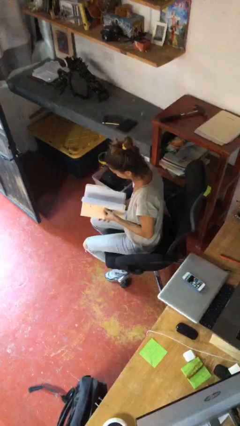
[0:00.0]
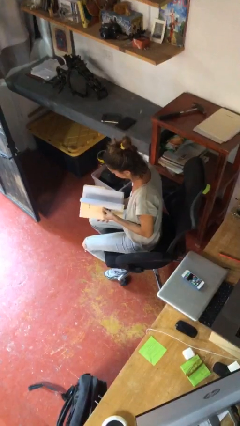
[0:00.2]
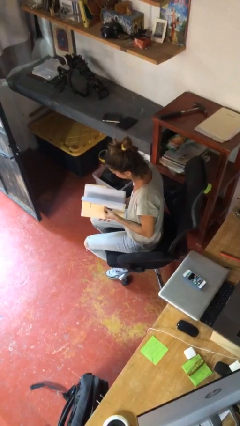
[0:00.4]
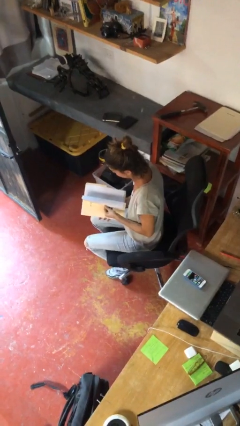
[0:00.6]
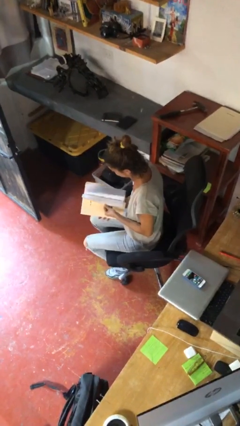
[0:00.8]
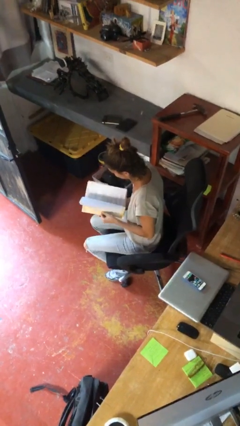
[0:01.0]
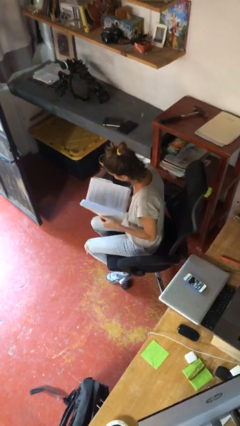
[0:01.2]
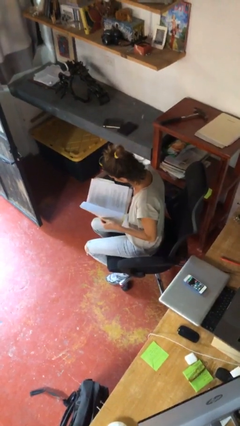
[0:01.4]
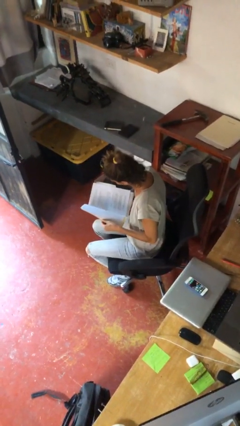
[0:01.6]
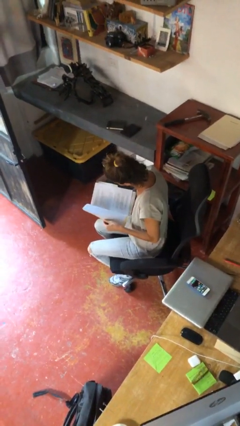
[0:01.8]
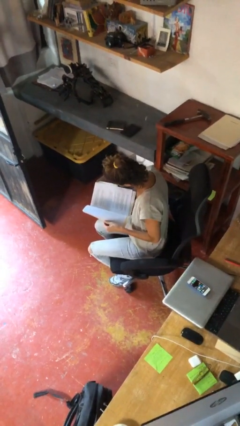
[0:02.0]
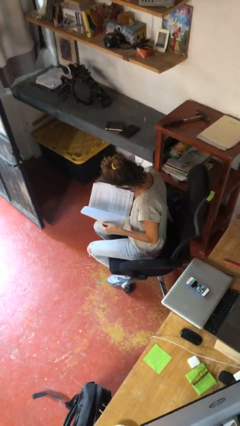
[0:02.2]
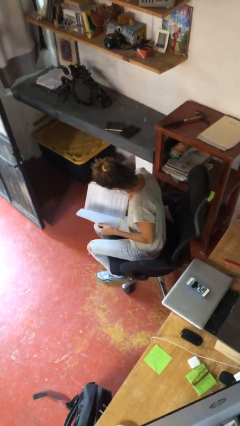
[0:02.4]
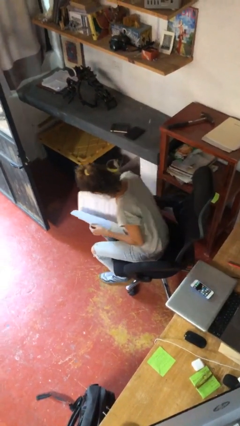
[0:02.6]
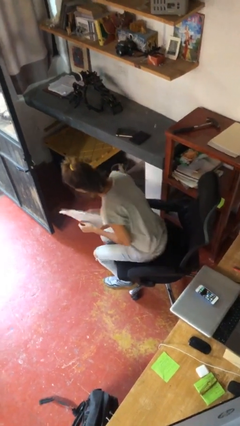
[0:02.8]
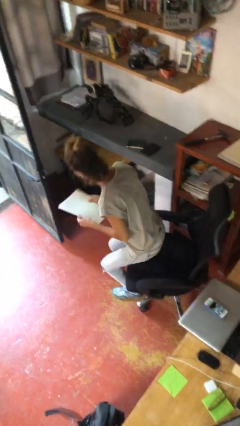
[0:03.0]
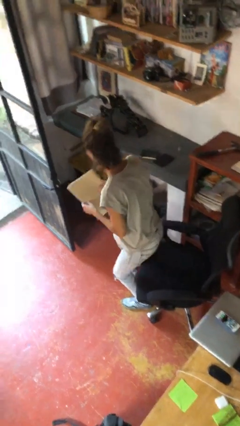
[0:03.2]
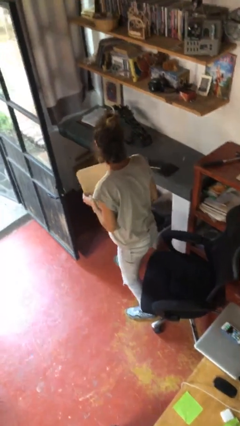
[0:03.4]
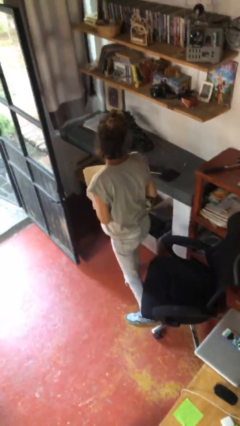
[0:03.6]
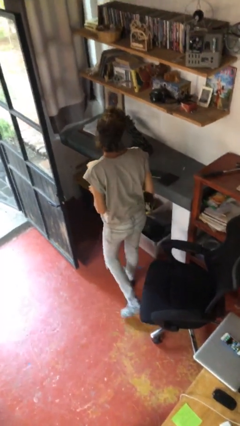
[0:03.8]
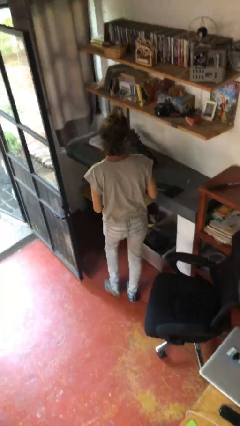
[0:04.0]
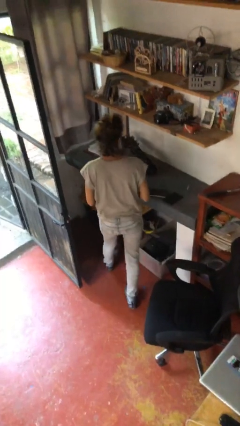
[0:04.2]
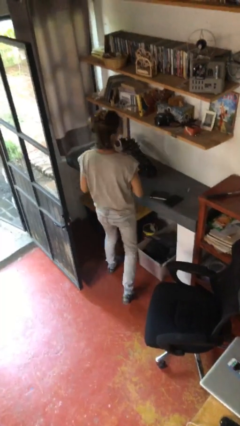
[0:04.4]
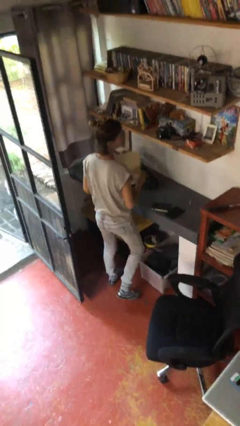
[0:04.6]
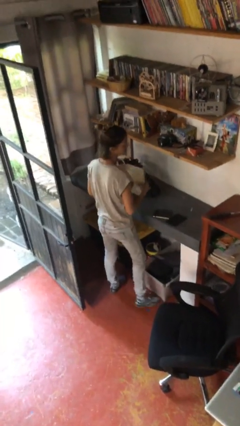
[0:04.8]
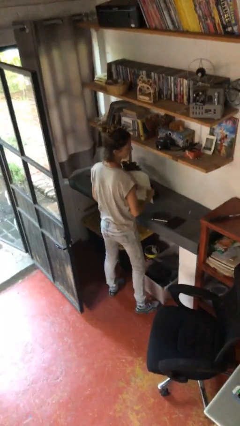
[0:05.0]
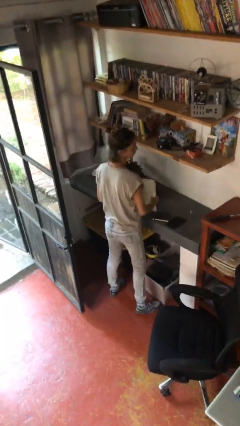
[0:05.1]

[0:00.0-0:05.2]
person stands up

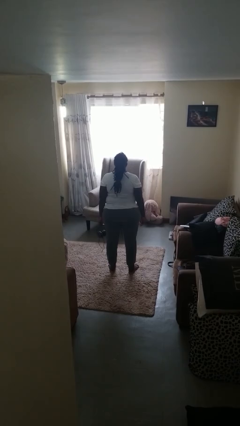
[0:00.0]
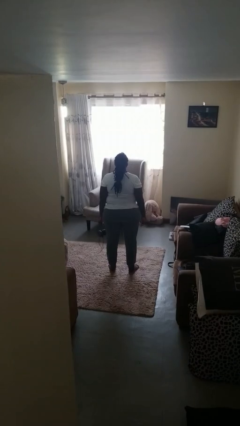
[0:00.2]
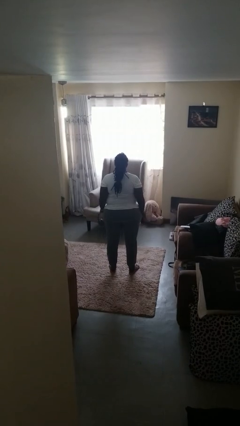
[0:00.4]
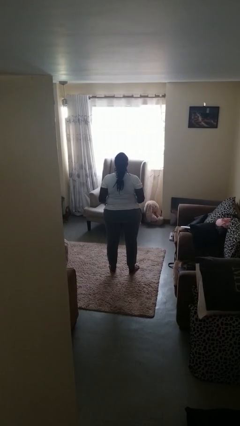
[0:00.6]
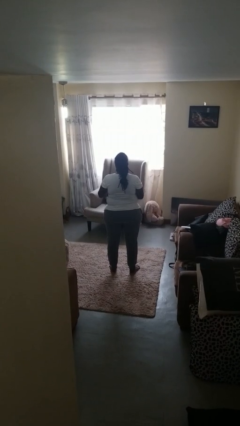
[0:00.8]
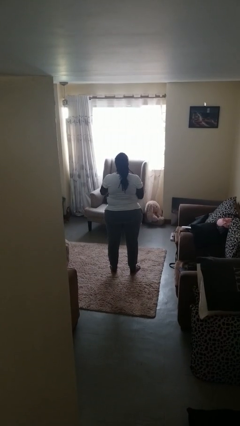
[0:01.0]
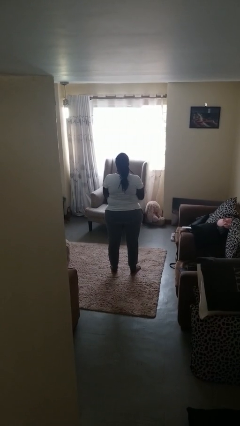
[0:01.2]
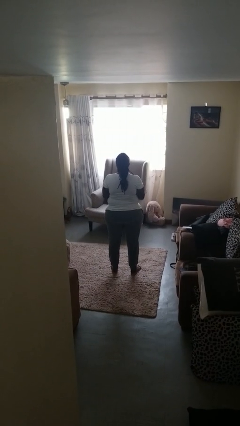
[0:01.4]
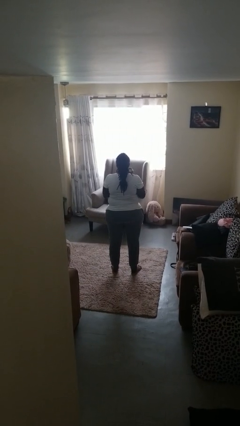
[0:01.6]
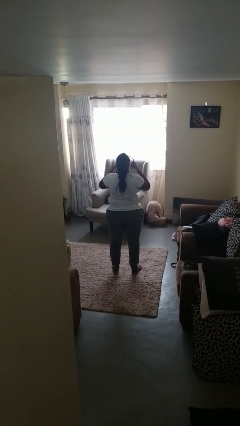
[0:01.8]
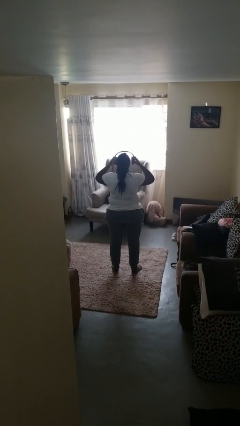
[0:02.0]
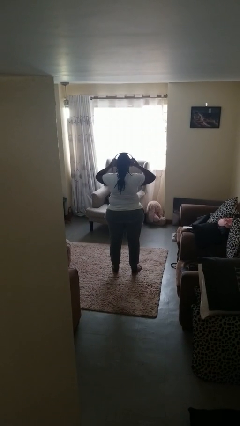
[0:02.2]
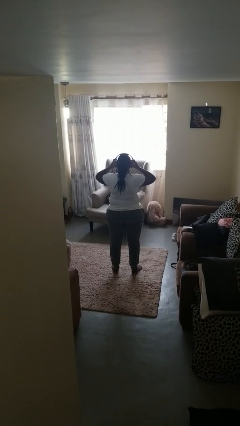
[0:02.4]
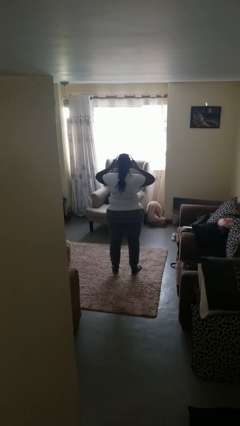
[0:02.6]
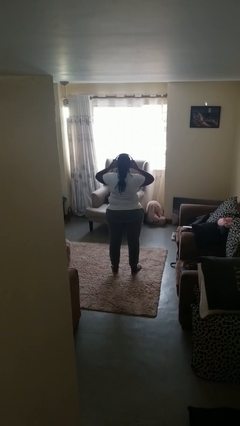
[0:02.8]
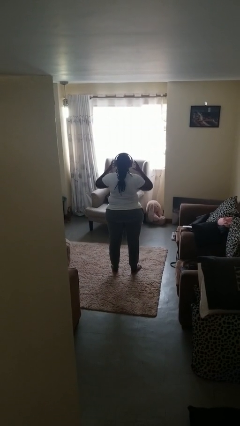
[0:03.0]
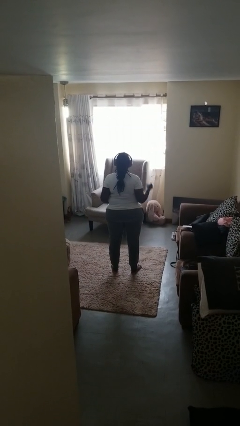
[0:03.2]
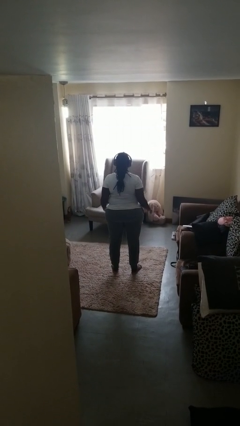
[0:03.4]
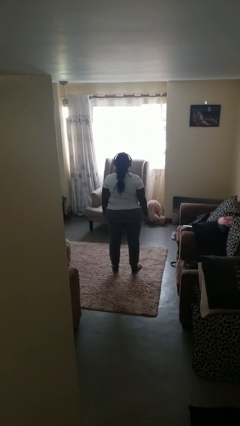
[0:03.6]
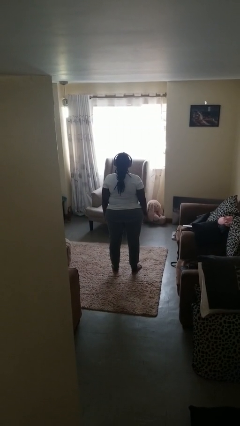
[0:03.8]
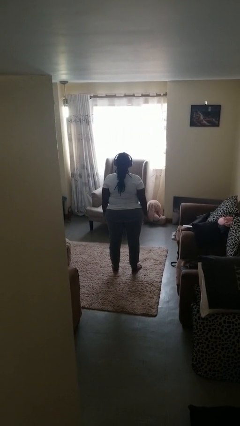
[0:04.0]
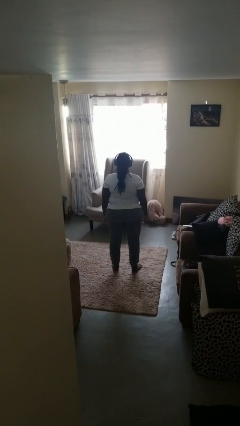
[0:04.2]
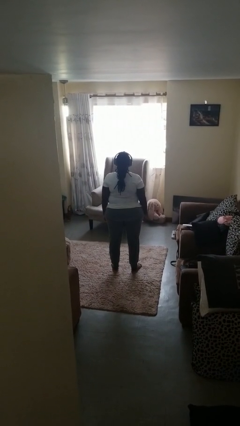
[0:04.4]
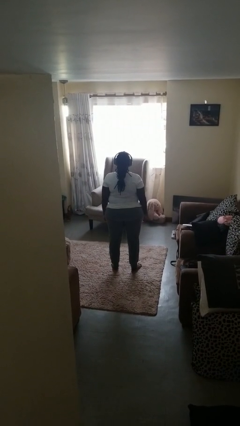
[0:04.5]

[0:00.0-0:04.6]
person puts on headphones

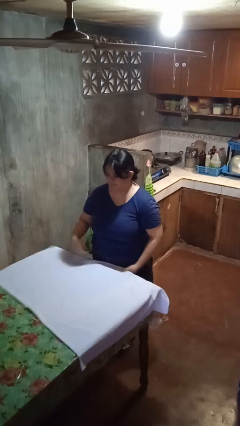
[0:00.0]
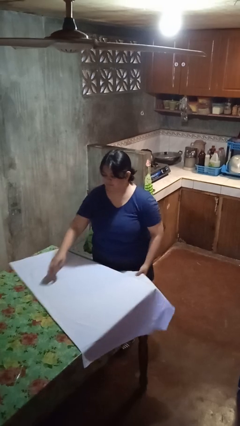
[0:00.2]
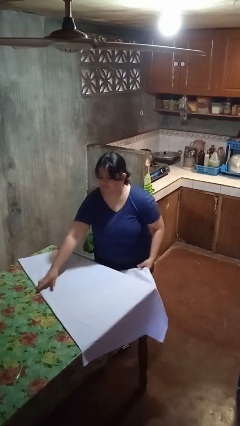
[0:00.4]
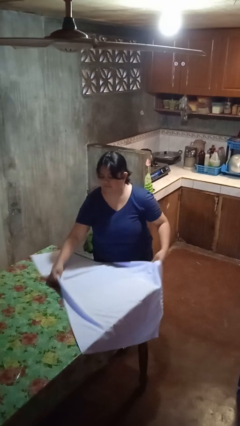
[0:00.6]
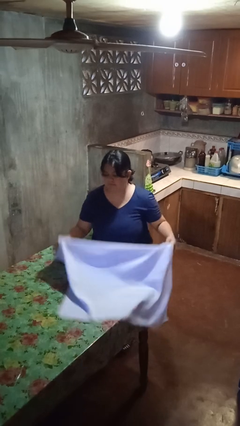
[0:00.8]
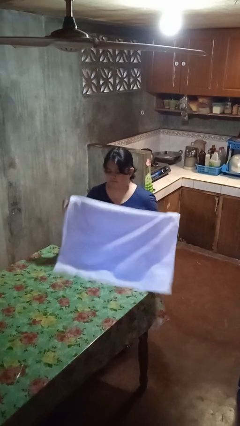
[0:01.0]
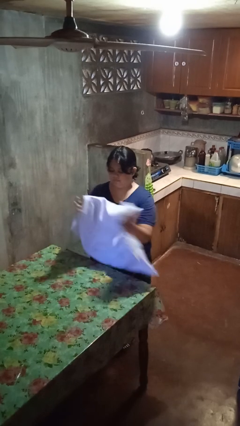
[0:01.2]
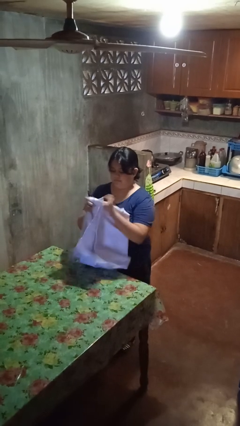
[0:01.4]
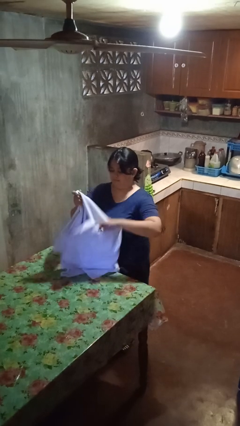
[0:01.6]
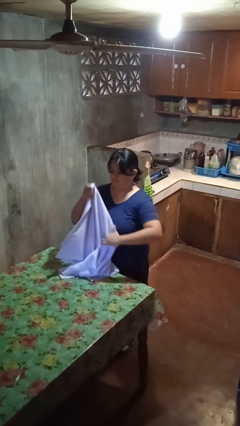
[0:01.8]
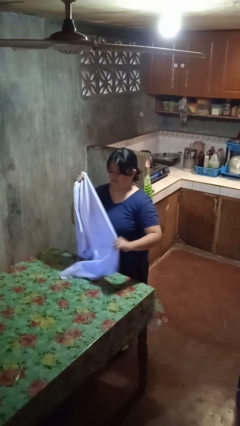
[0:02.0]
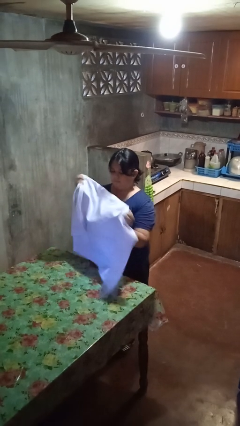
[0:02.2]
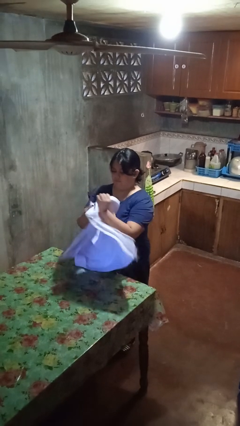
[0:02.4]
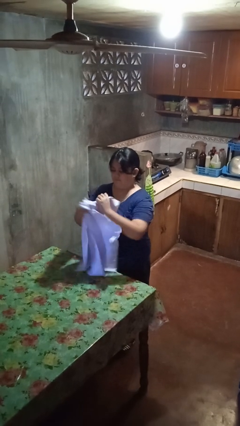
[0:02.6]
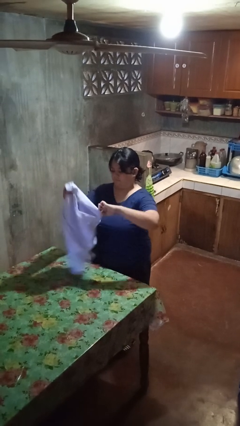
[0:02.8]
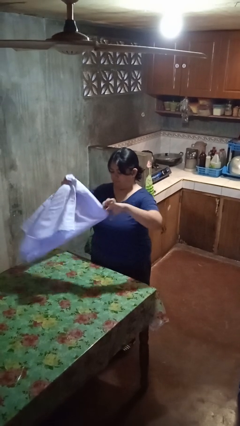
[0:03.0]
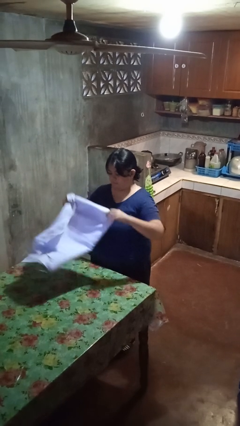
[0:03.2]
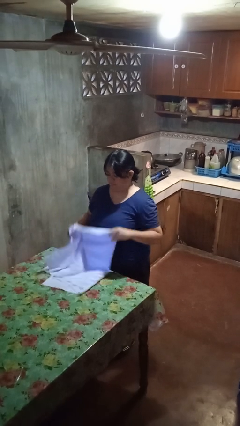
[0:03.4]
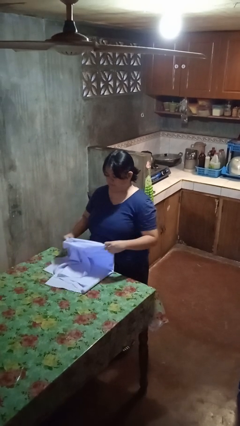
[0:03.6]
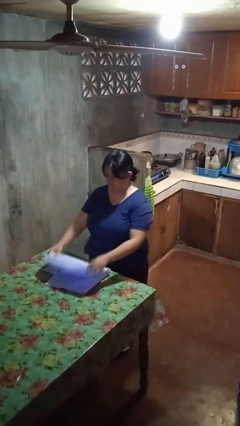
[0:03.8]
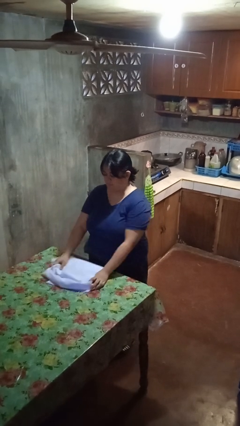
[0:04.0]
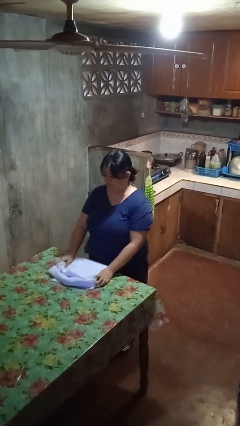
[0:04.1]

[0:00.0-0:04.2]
person folds tablecloth

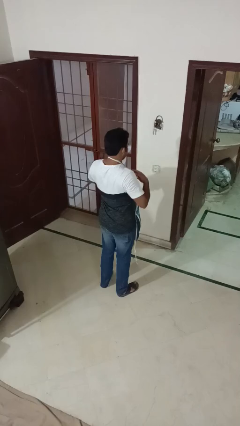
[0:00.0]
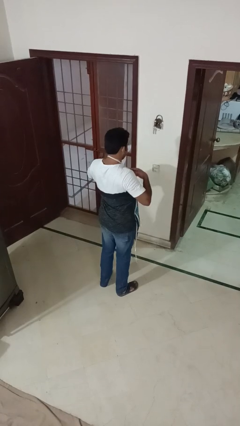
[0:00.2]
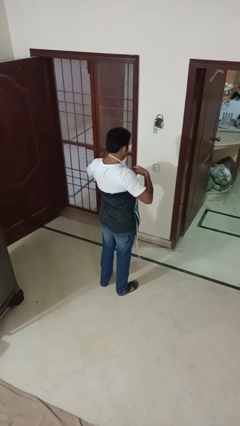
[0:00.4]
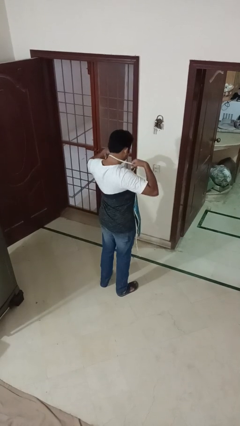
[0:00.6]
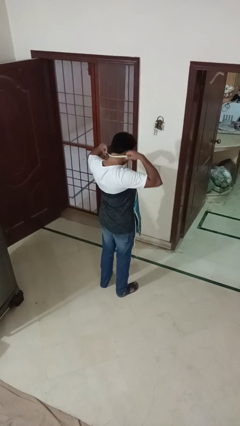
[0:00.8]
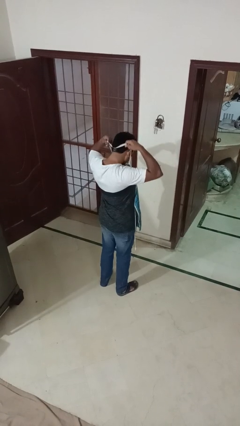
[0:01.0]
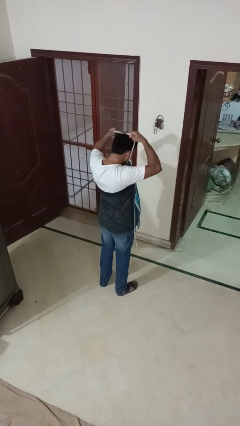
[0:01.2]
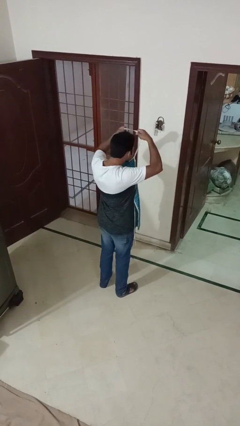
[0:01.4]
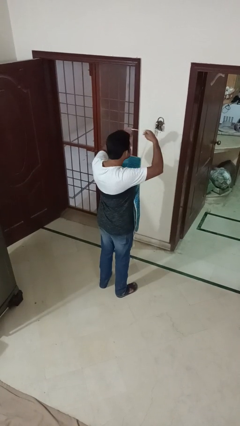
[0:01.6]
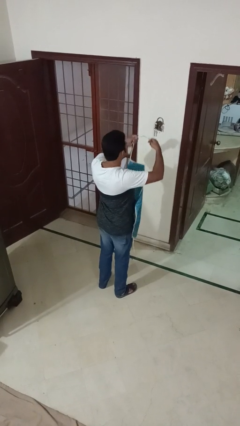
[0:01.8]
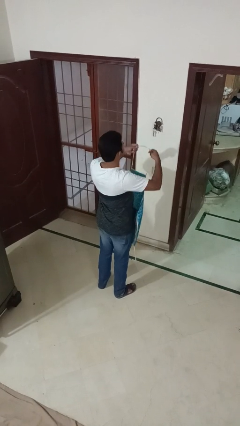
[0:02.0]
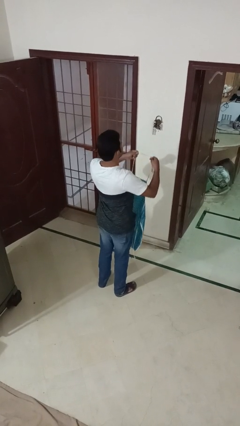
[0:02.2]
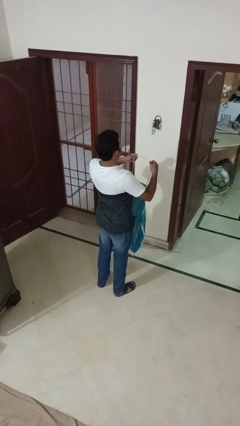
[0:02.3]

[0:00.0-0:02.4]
person takes off apron

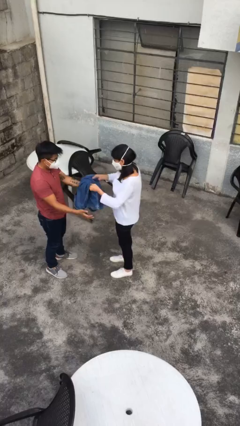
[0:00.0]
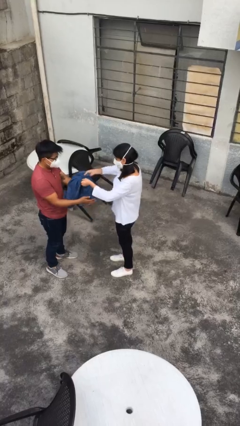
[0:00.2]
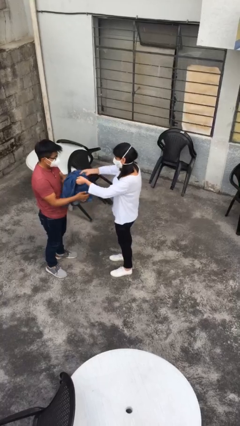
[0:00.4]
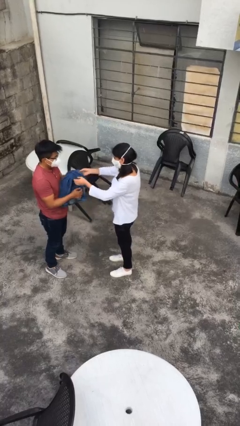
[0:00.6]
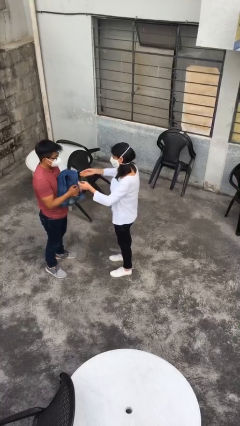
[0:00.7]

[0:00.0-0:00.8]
person transfers object to person

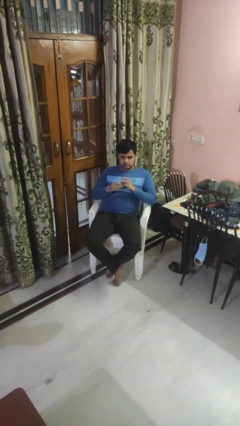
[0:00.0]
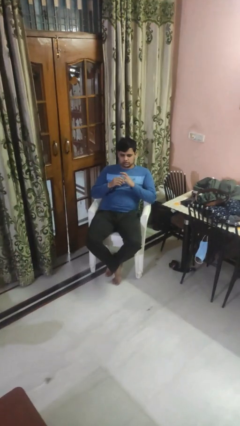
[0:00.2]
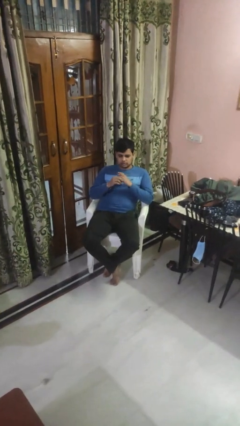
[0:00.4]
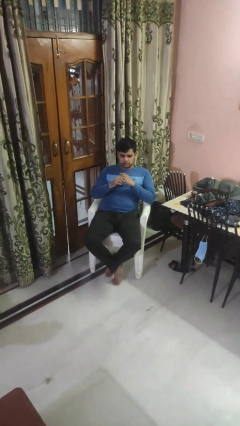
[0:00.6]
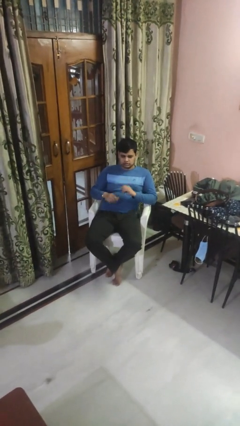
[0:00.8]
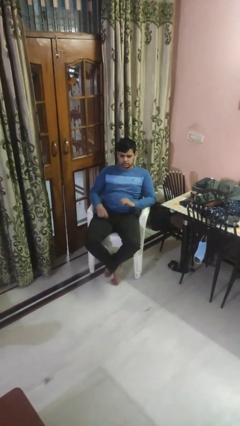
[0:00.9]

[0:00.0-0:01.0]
person puts on ring
